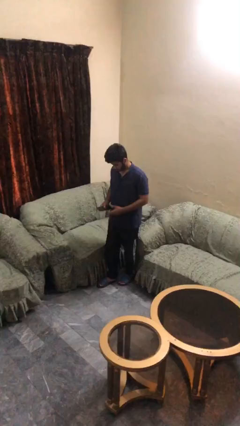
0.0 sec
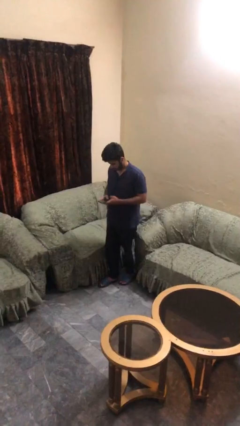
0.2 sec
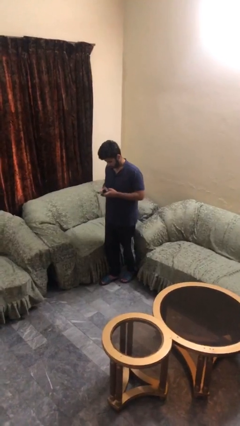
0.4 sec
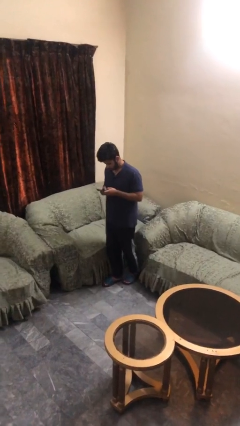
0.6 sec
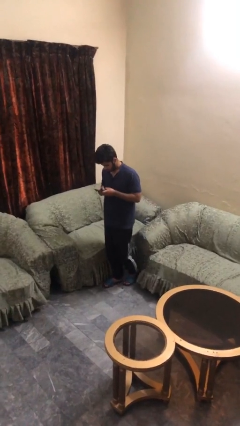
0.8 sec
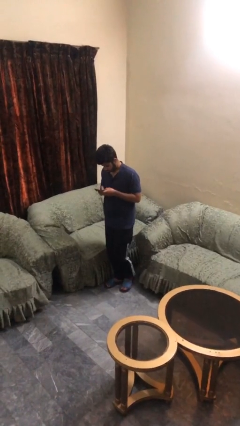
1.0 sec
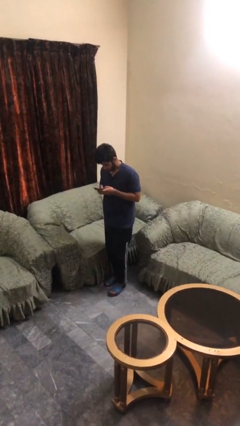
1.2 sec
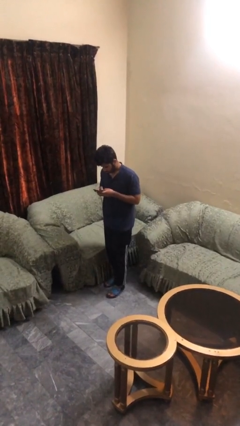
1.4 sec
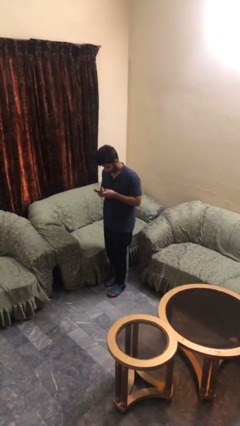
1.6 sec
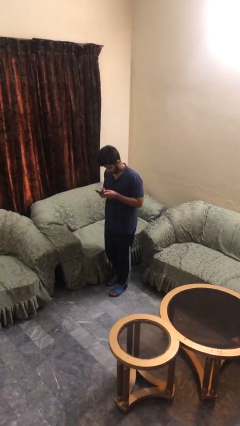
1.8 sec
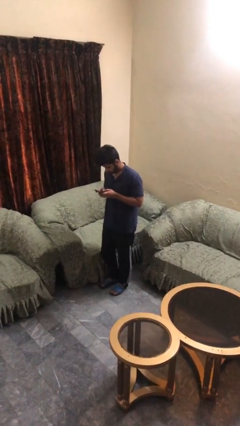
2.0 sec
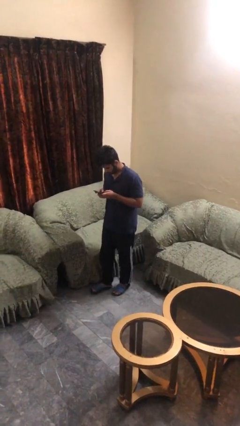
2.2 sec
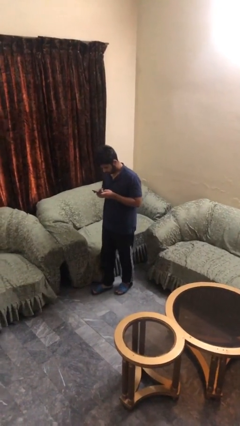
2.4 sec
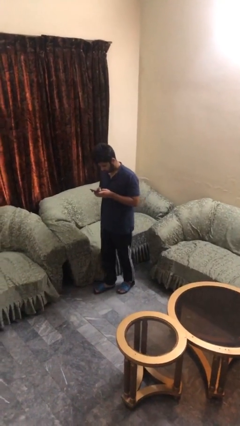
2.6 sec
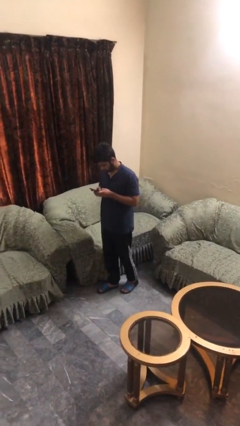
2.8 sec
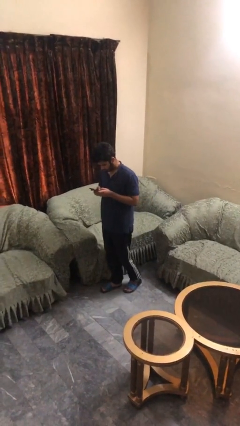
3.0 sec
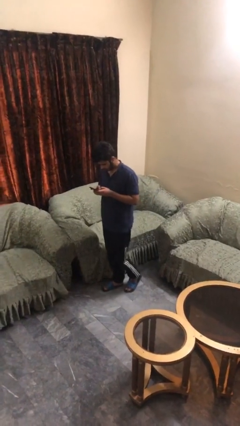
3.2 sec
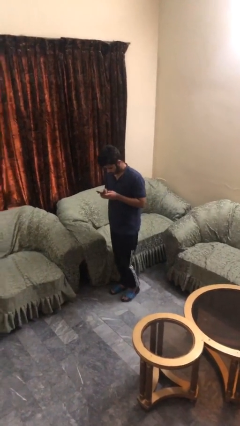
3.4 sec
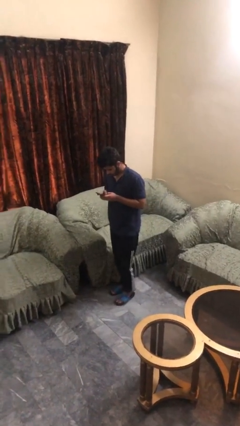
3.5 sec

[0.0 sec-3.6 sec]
person texts on phone

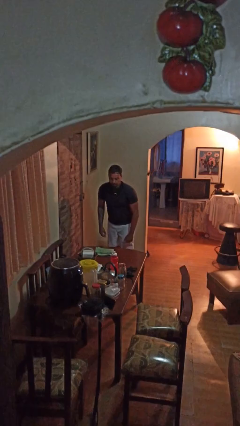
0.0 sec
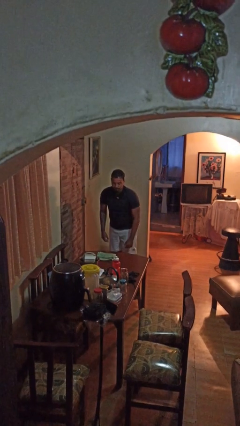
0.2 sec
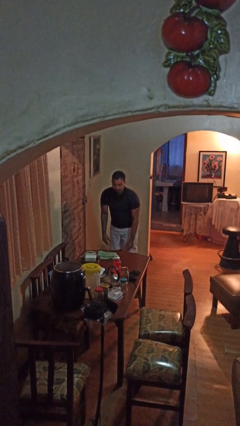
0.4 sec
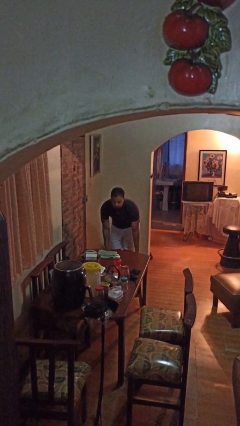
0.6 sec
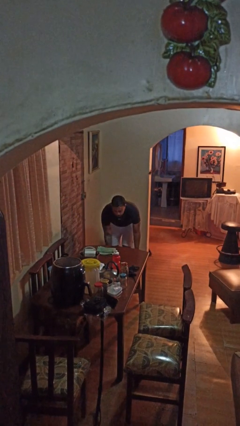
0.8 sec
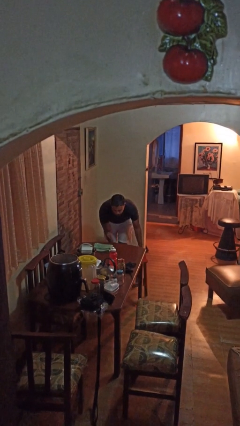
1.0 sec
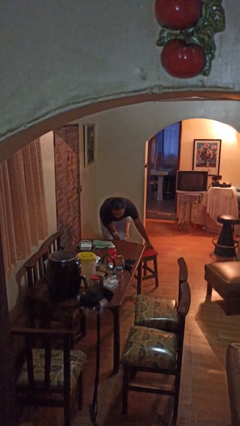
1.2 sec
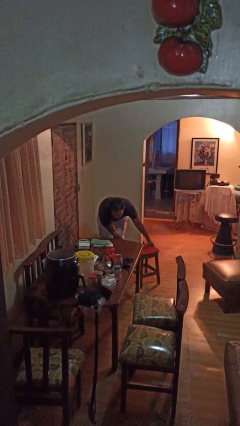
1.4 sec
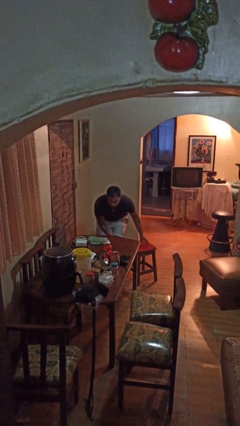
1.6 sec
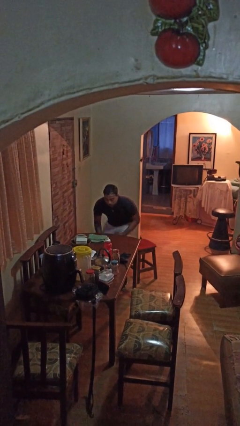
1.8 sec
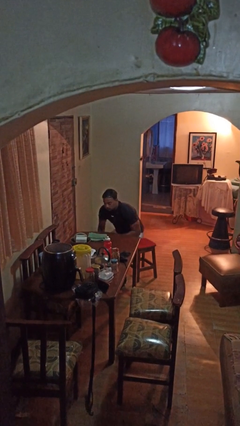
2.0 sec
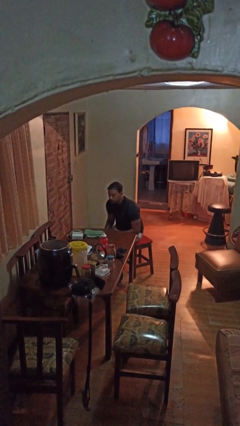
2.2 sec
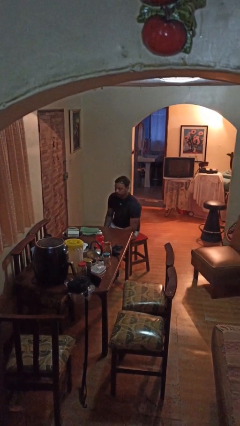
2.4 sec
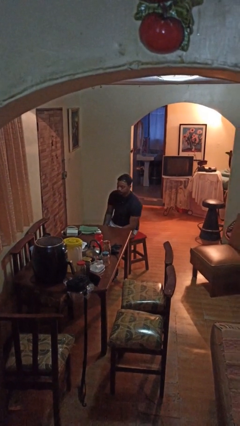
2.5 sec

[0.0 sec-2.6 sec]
person sits down

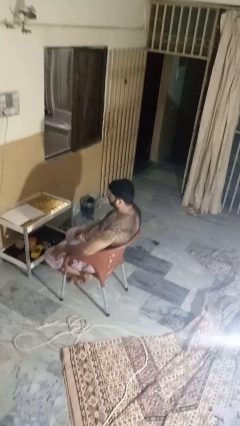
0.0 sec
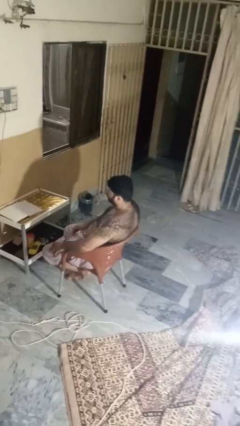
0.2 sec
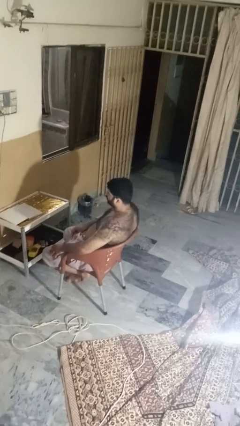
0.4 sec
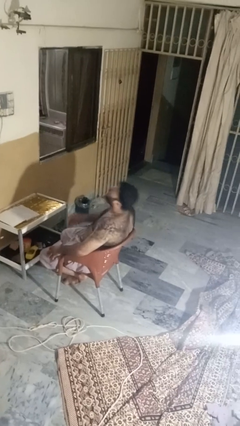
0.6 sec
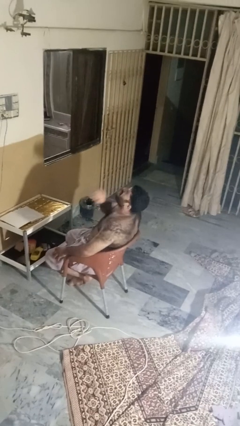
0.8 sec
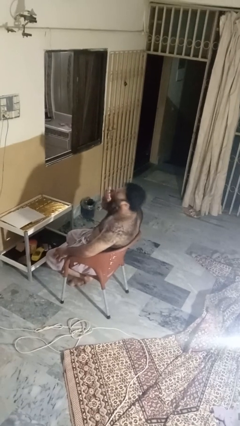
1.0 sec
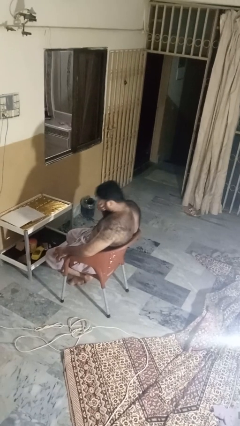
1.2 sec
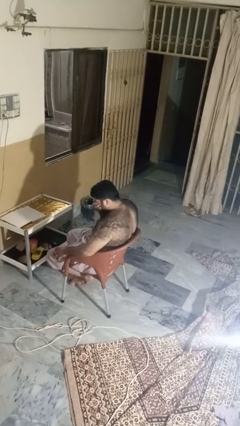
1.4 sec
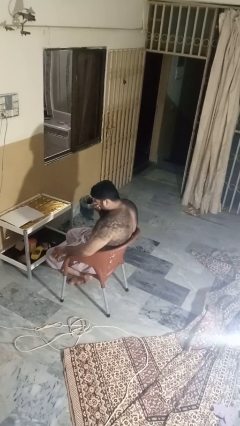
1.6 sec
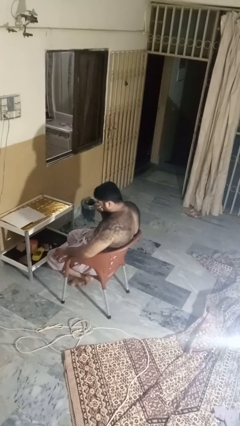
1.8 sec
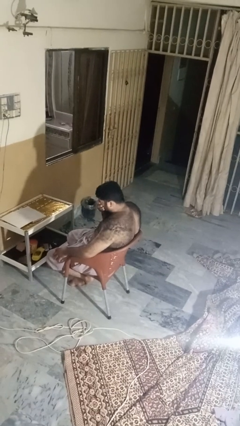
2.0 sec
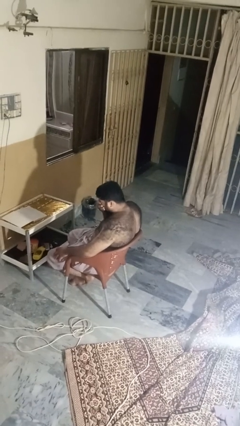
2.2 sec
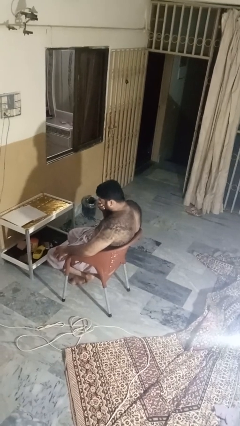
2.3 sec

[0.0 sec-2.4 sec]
person sneezes into hand

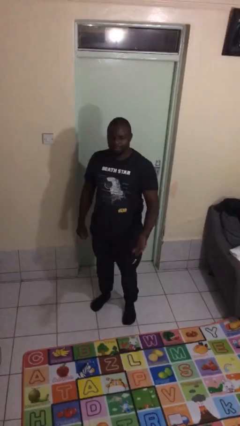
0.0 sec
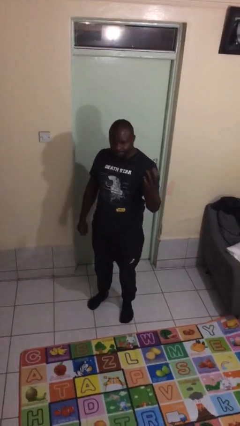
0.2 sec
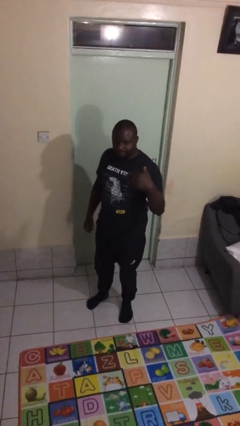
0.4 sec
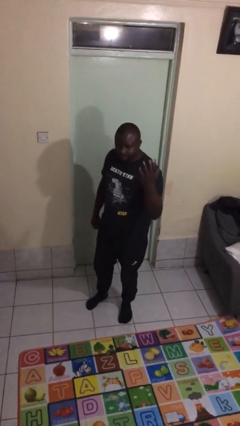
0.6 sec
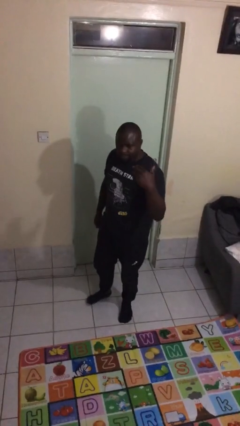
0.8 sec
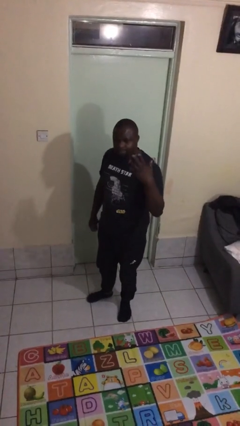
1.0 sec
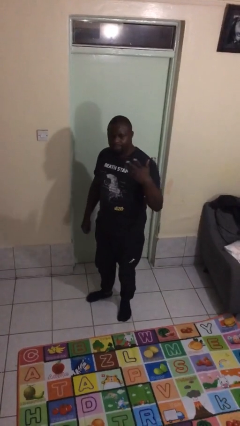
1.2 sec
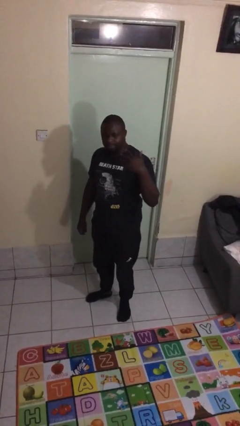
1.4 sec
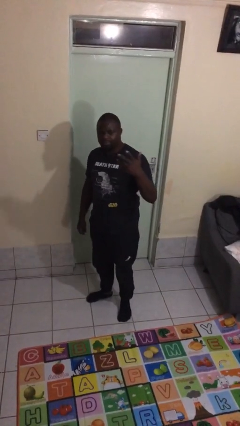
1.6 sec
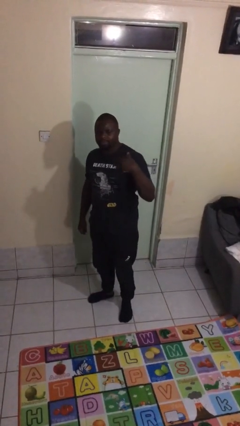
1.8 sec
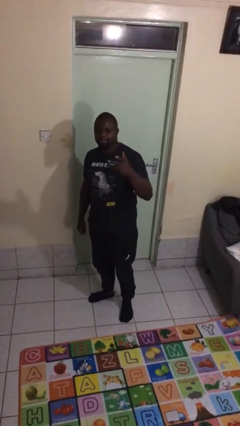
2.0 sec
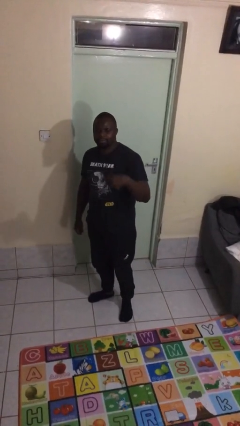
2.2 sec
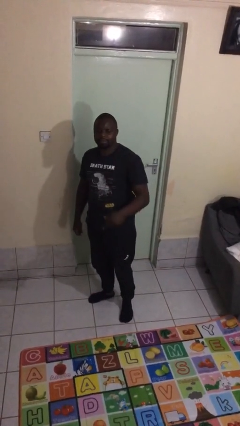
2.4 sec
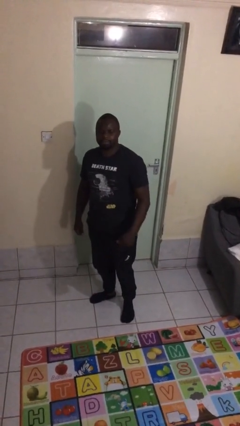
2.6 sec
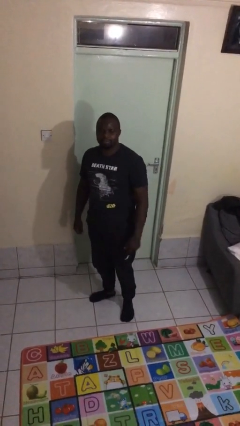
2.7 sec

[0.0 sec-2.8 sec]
person gestures come here

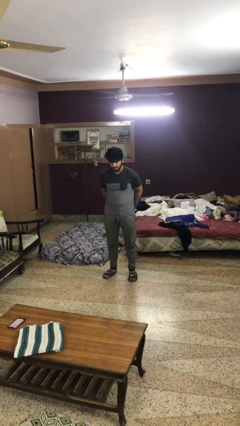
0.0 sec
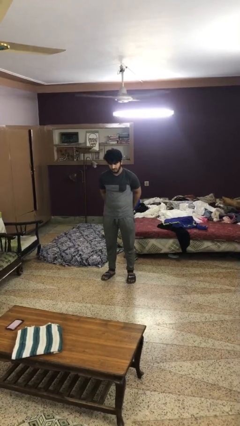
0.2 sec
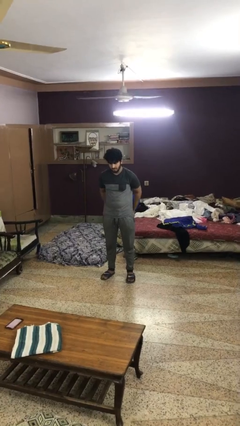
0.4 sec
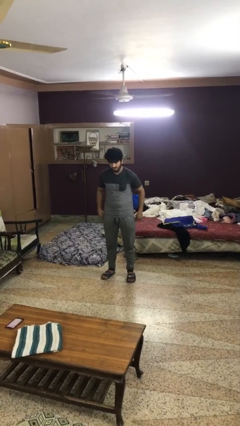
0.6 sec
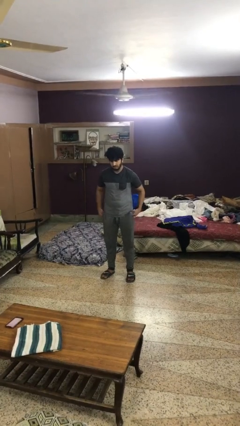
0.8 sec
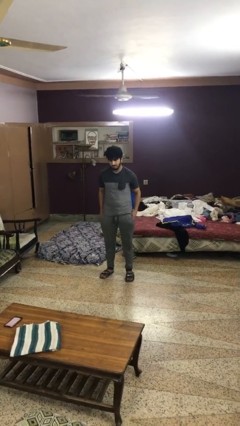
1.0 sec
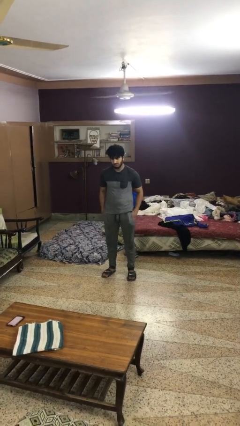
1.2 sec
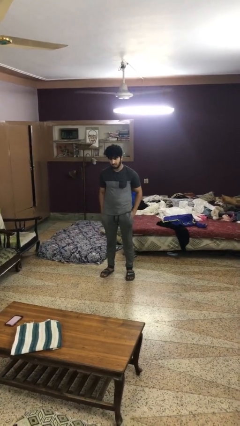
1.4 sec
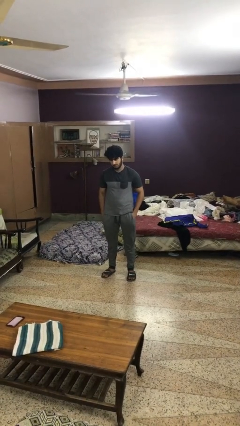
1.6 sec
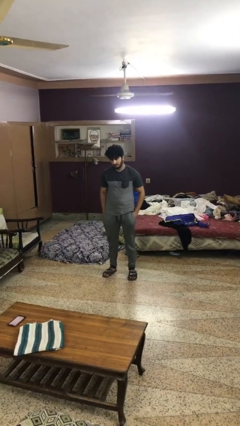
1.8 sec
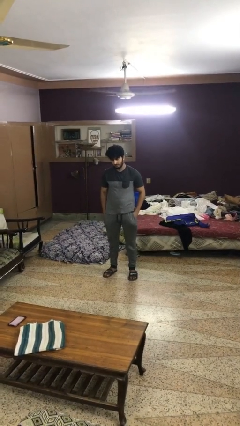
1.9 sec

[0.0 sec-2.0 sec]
person puts hands in back pockets

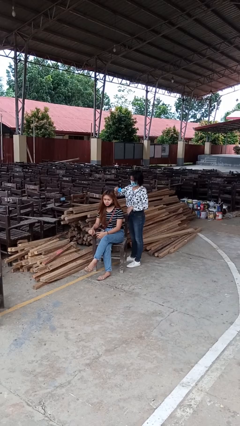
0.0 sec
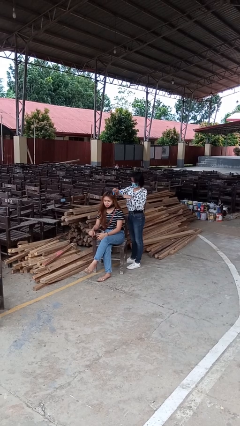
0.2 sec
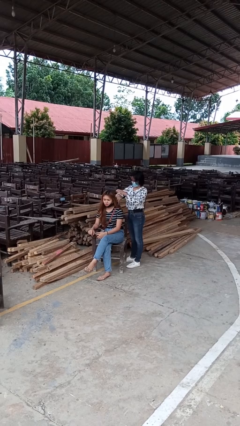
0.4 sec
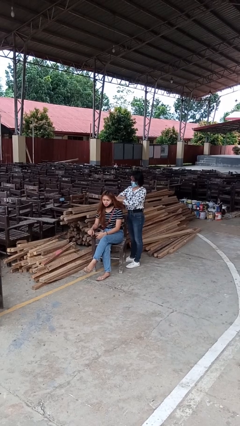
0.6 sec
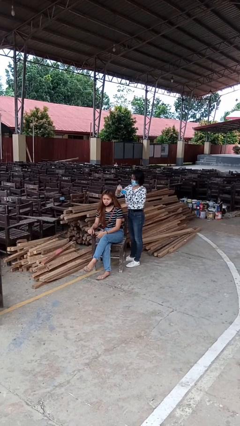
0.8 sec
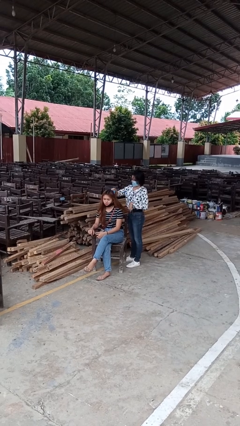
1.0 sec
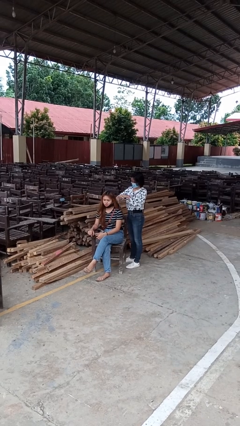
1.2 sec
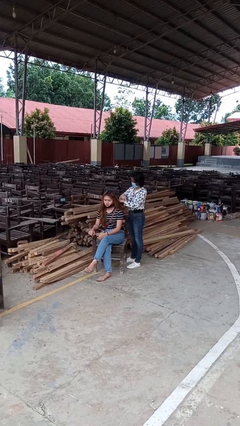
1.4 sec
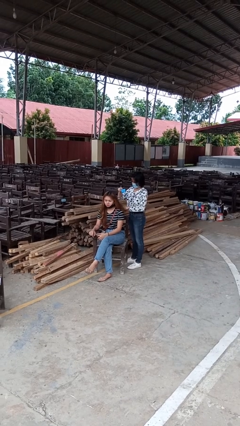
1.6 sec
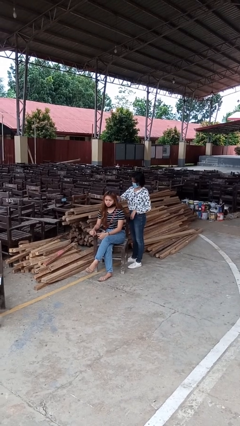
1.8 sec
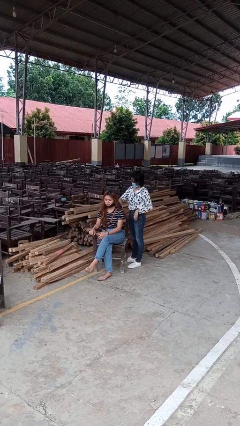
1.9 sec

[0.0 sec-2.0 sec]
person brushes hair of person

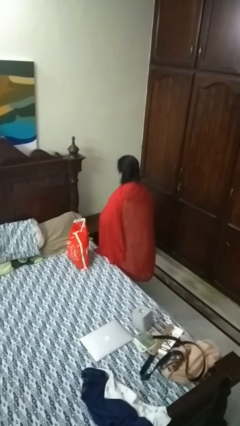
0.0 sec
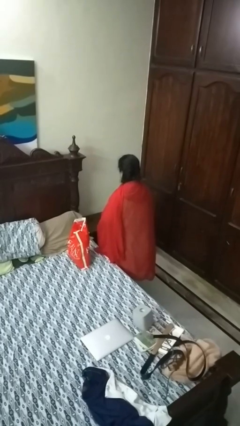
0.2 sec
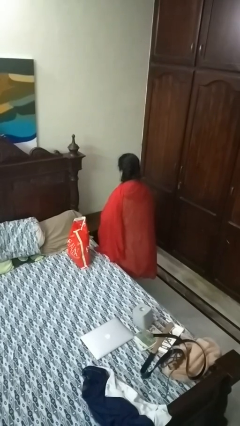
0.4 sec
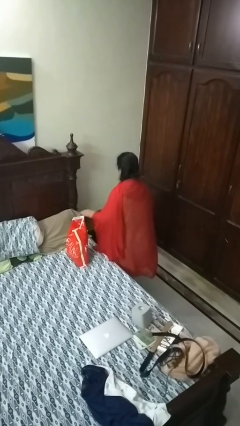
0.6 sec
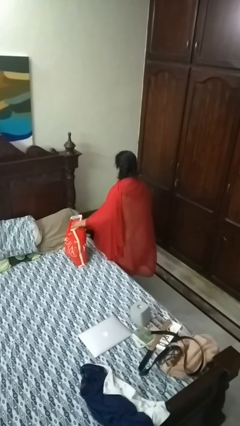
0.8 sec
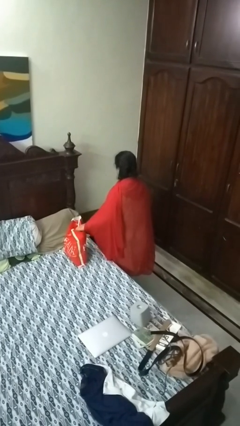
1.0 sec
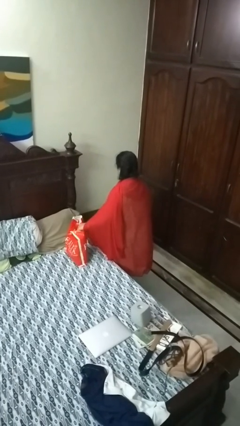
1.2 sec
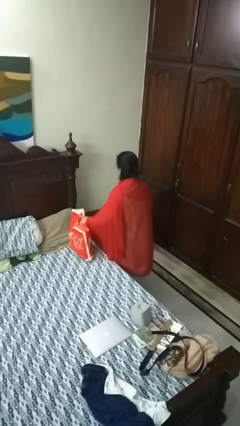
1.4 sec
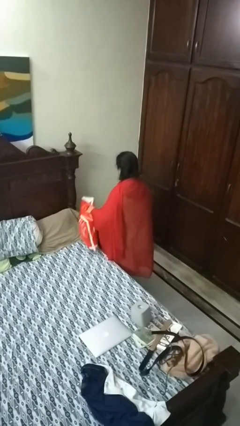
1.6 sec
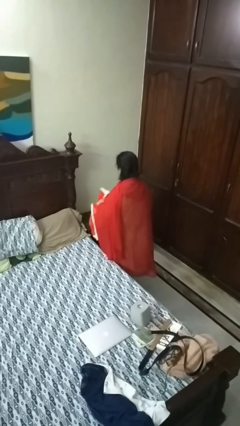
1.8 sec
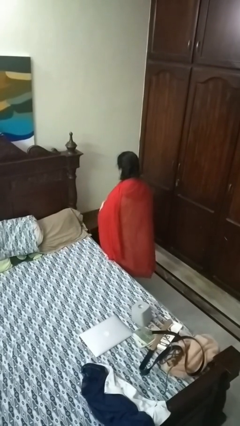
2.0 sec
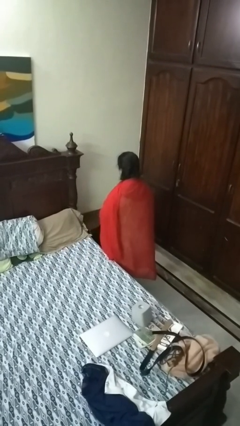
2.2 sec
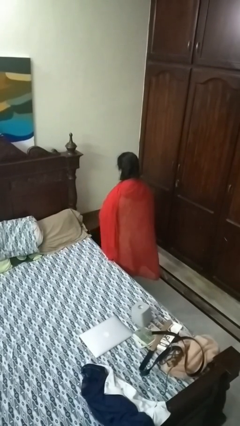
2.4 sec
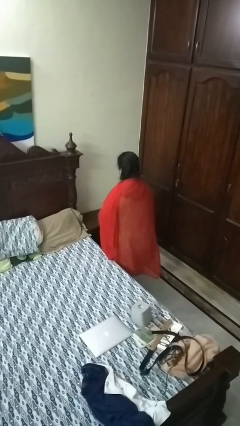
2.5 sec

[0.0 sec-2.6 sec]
person picks up object from bed
